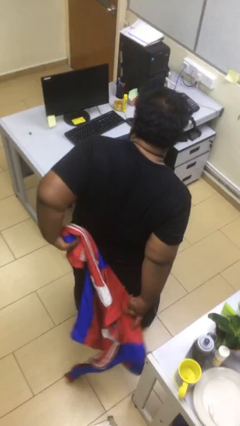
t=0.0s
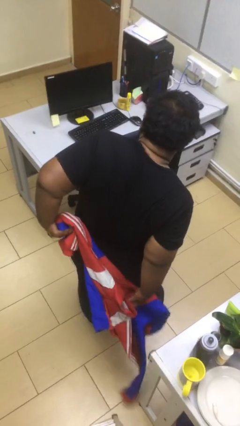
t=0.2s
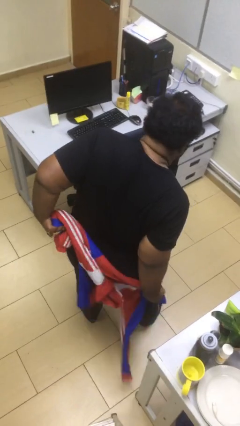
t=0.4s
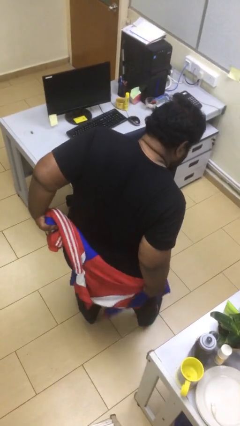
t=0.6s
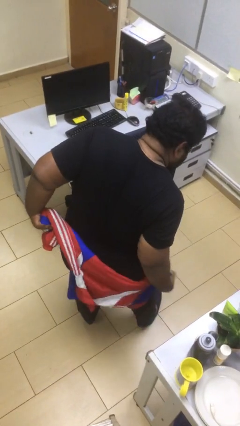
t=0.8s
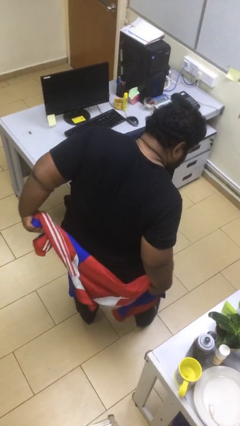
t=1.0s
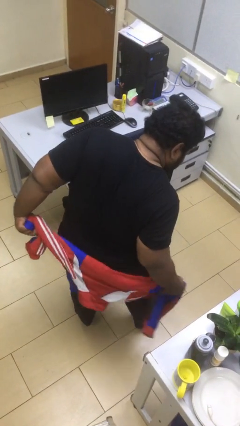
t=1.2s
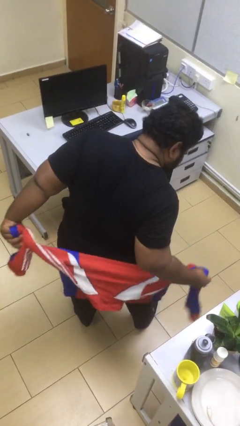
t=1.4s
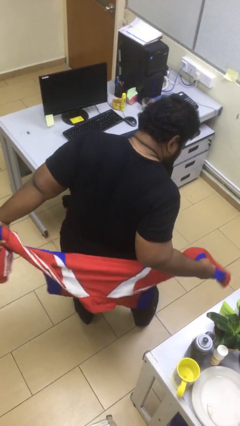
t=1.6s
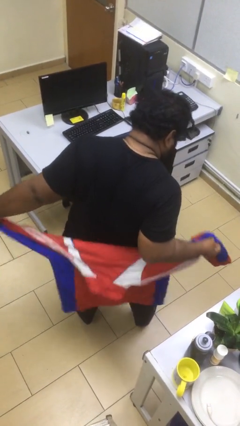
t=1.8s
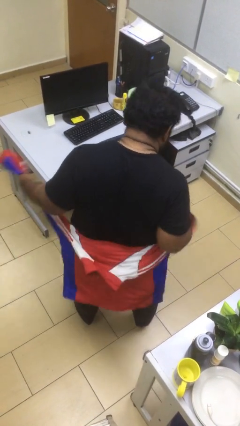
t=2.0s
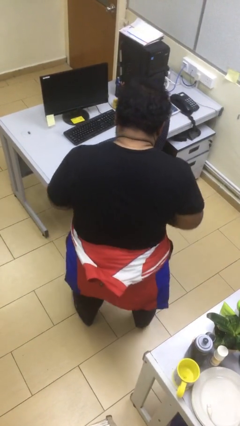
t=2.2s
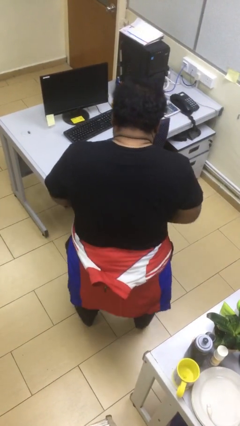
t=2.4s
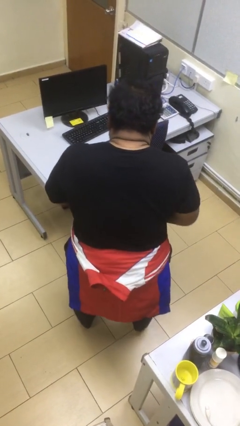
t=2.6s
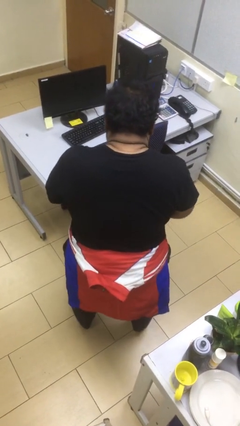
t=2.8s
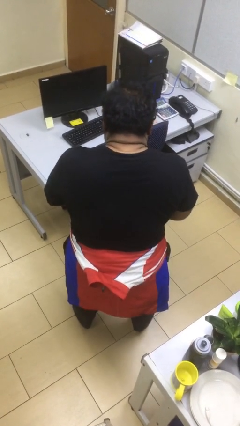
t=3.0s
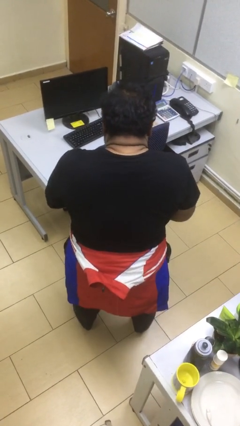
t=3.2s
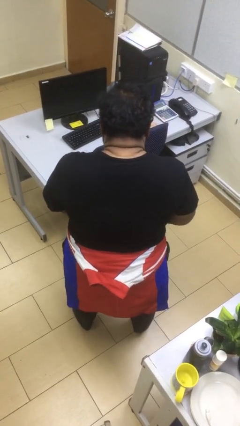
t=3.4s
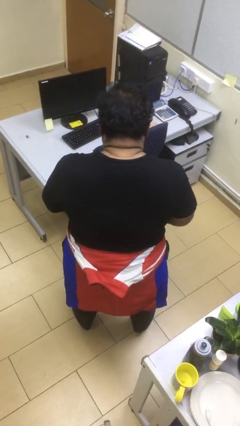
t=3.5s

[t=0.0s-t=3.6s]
person ties jacket around waist

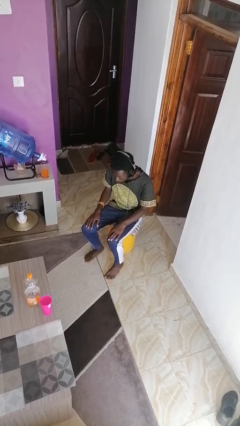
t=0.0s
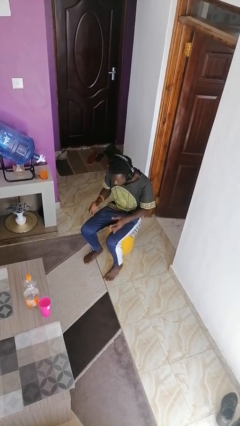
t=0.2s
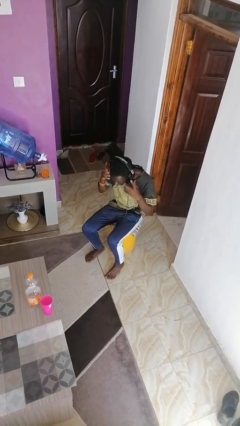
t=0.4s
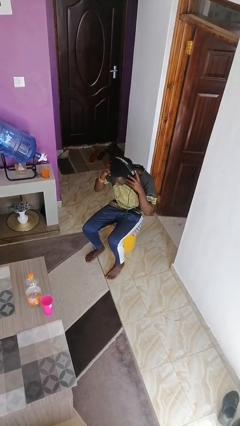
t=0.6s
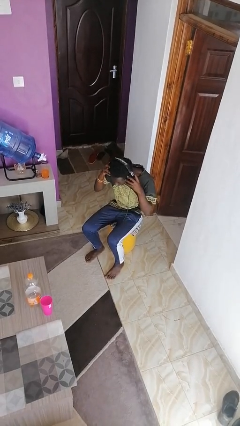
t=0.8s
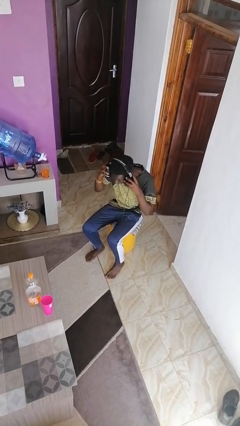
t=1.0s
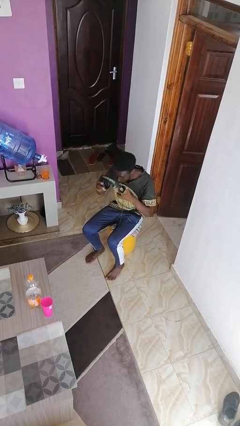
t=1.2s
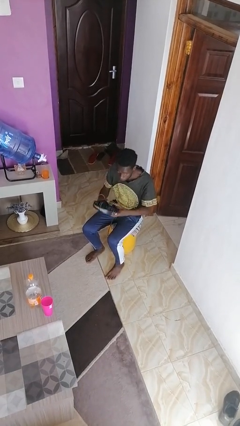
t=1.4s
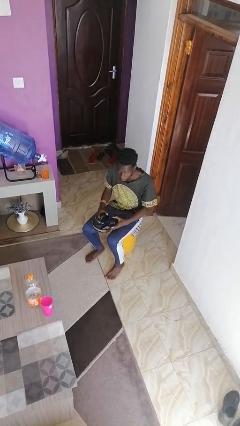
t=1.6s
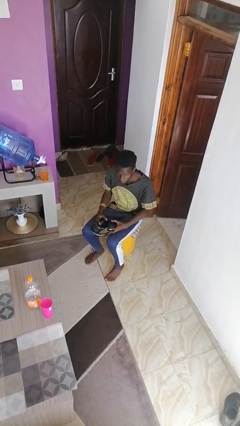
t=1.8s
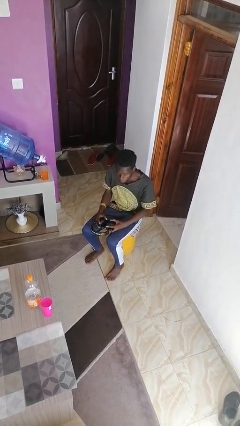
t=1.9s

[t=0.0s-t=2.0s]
person takes off headphones

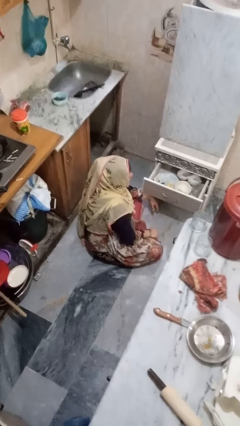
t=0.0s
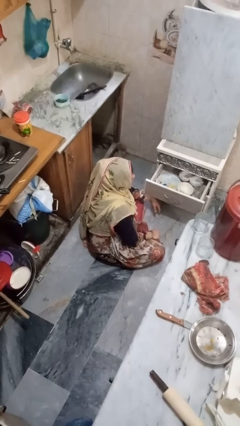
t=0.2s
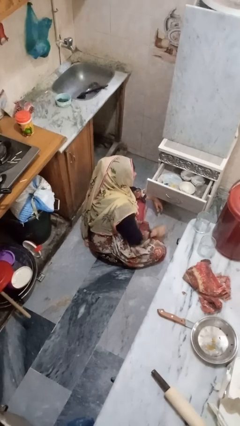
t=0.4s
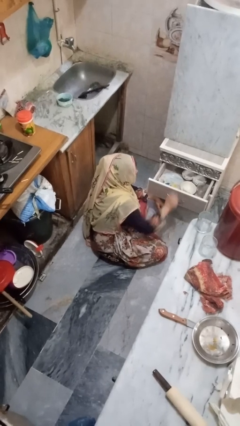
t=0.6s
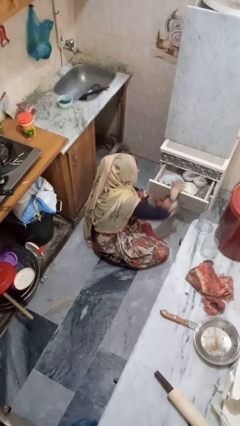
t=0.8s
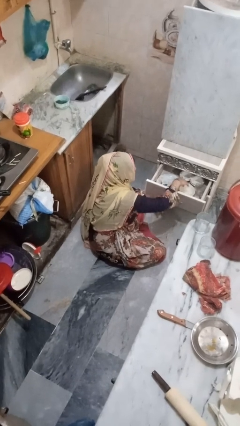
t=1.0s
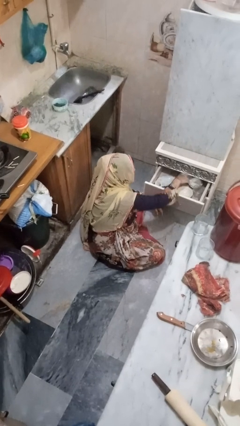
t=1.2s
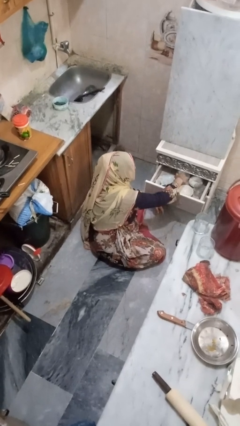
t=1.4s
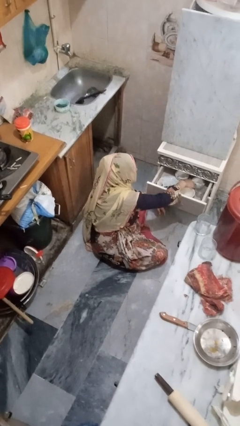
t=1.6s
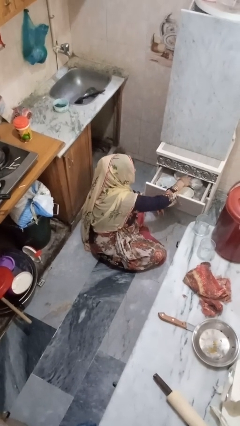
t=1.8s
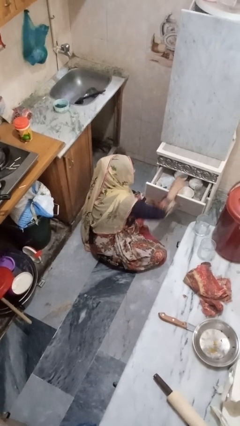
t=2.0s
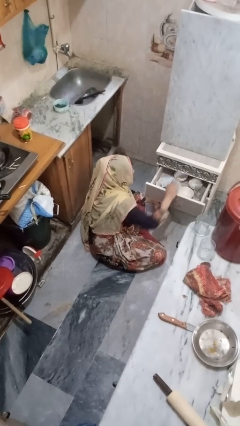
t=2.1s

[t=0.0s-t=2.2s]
person searches in kitchen drawer

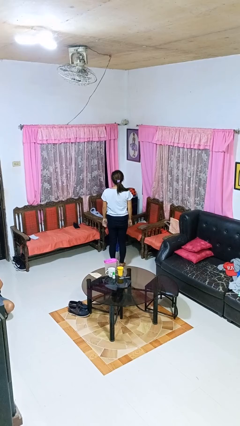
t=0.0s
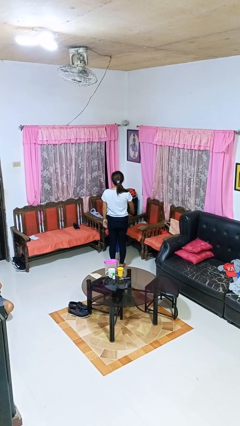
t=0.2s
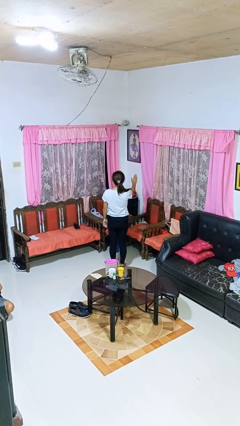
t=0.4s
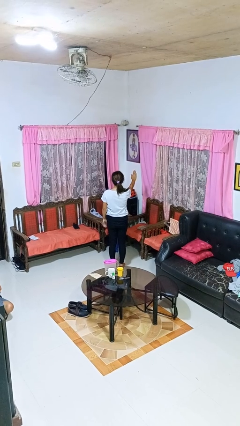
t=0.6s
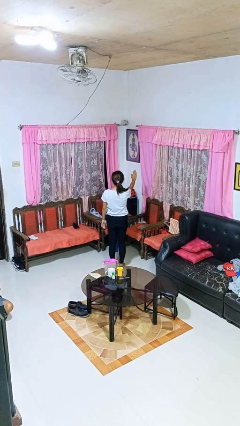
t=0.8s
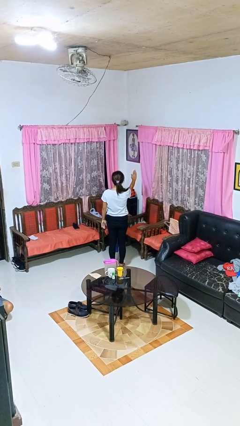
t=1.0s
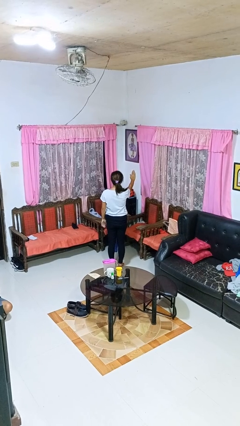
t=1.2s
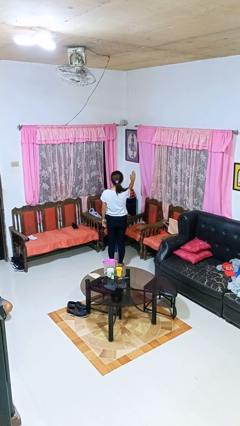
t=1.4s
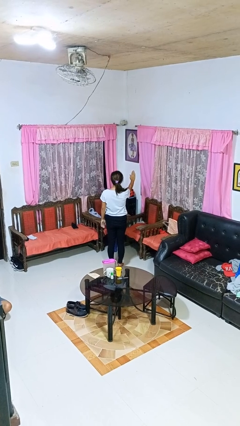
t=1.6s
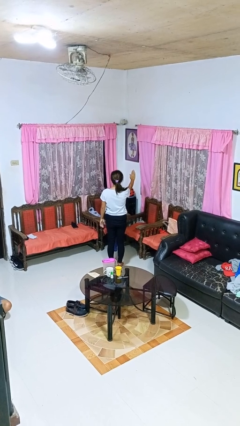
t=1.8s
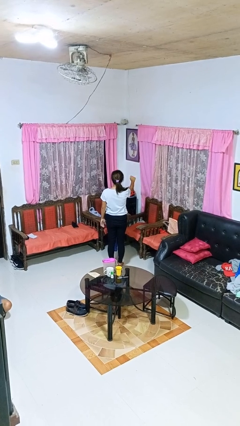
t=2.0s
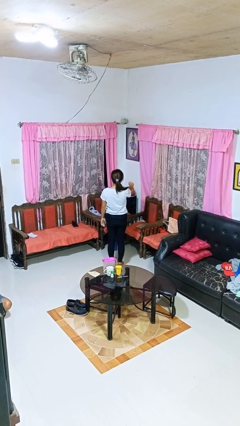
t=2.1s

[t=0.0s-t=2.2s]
person gestures stop

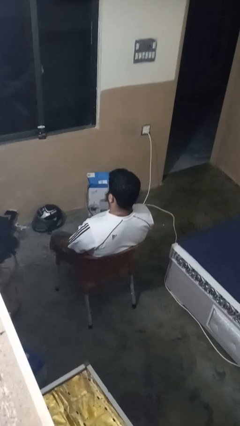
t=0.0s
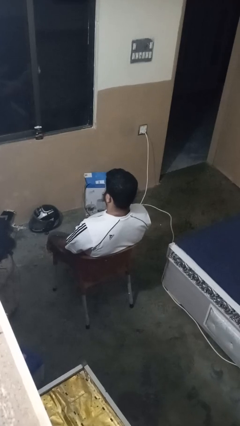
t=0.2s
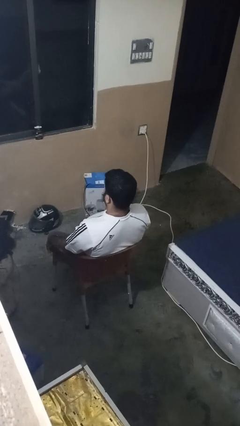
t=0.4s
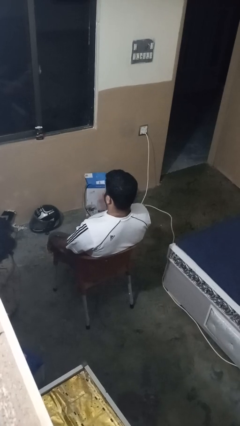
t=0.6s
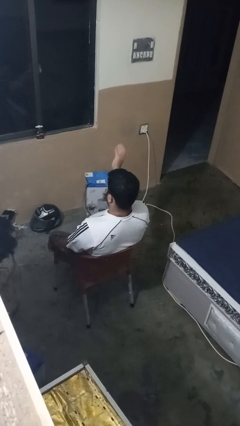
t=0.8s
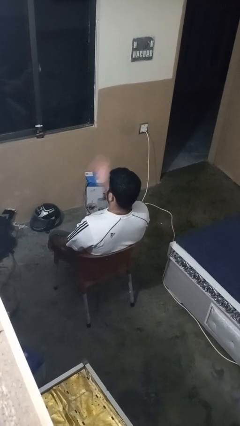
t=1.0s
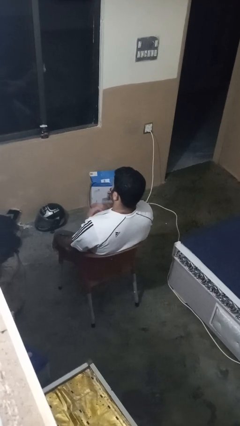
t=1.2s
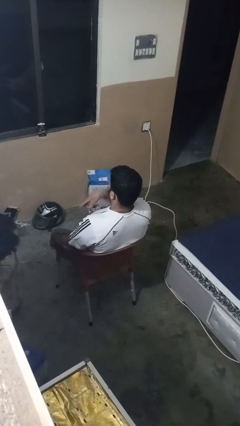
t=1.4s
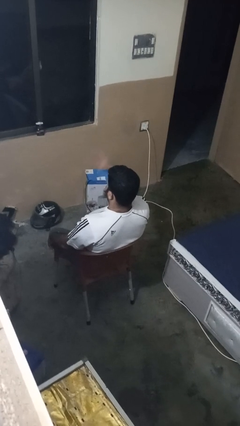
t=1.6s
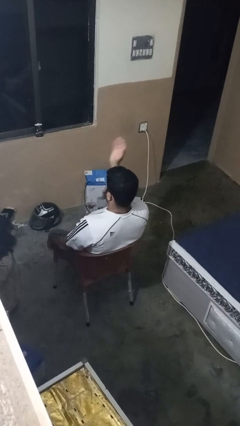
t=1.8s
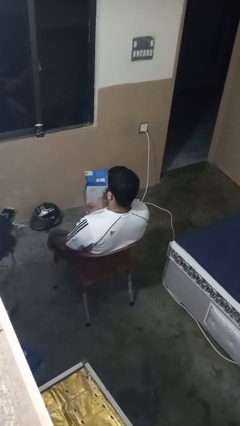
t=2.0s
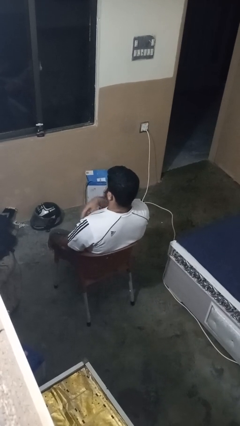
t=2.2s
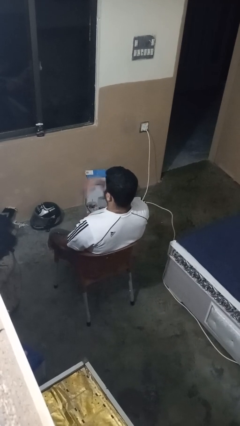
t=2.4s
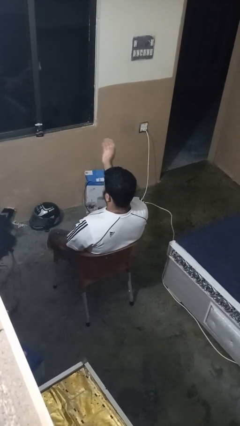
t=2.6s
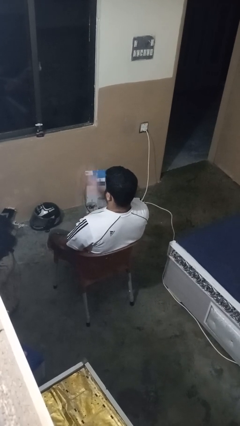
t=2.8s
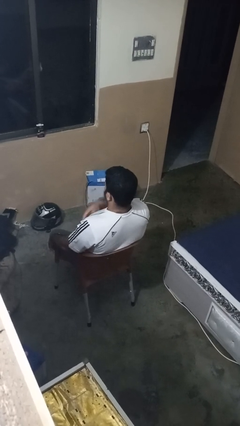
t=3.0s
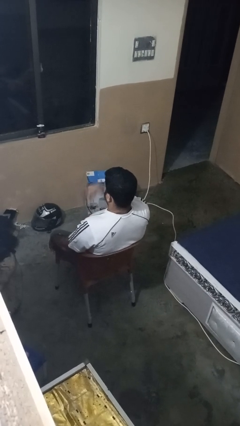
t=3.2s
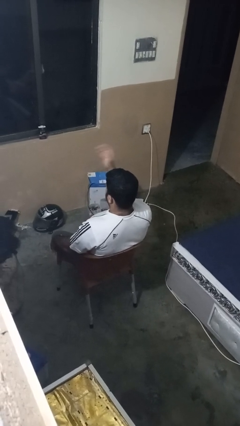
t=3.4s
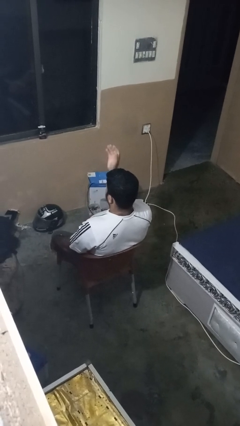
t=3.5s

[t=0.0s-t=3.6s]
person drums on chest

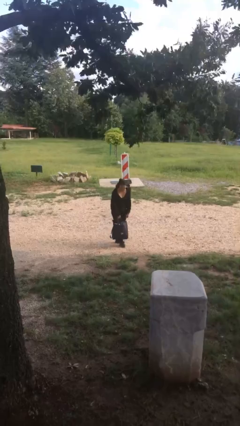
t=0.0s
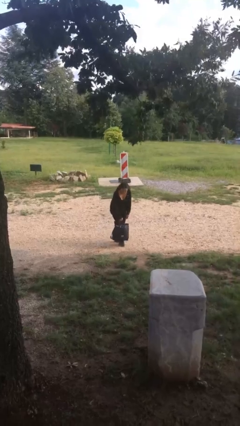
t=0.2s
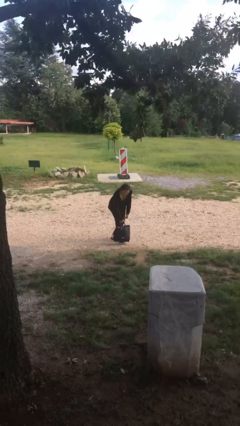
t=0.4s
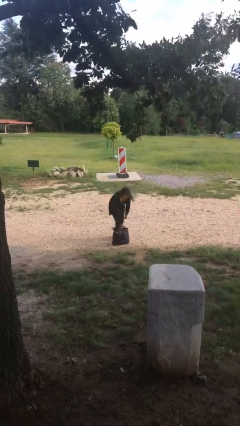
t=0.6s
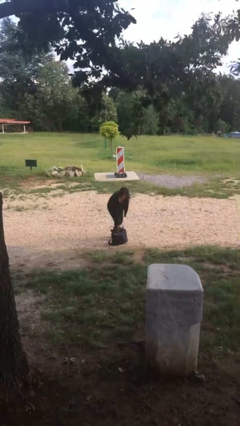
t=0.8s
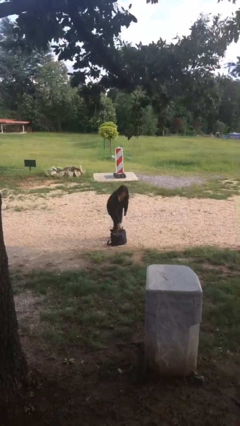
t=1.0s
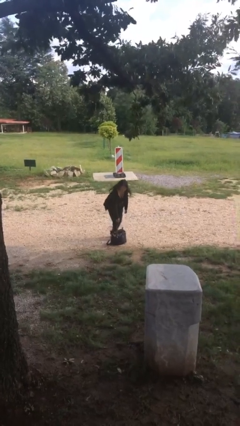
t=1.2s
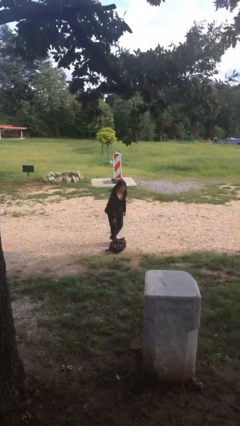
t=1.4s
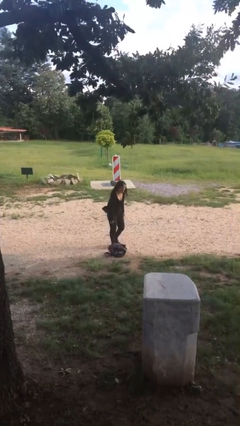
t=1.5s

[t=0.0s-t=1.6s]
person puts down object on floor

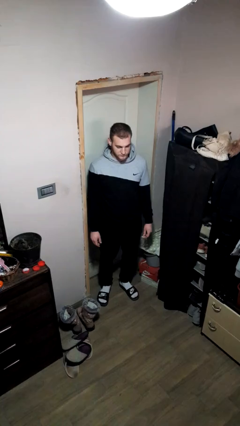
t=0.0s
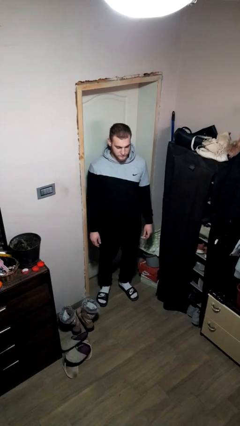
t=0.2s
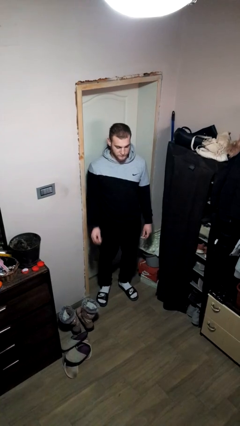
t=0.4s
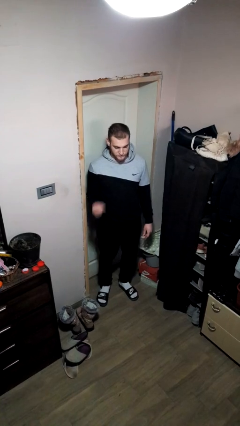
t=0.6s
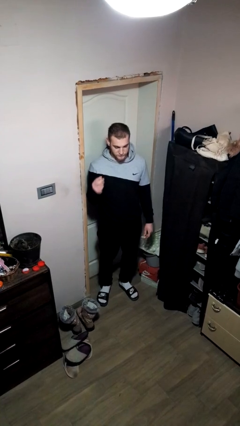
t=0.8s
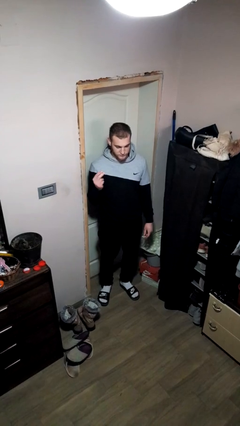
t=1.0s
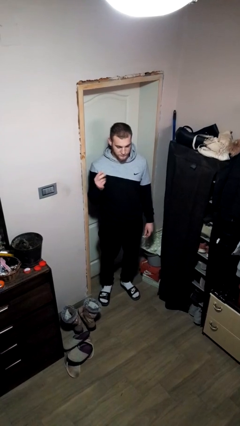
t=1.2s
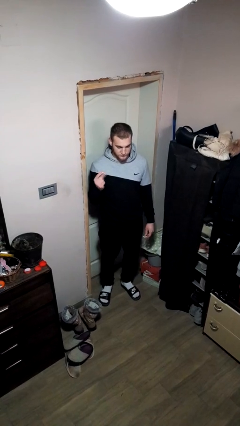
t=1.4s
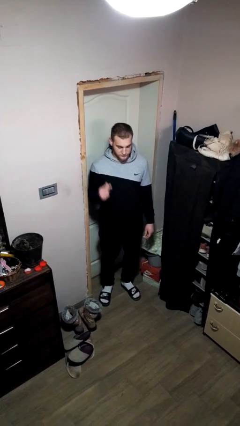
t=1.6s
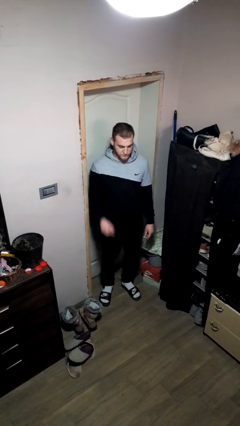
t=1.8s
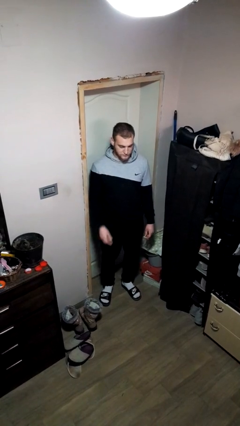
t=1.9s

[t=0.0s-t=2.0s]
person snaps fingers
